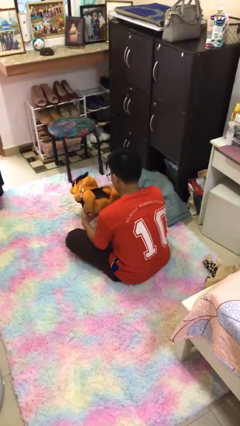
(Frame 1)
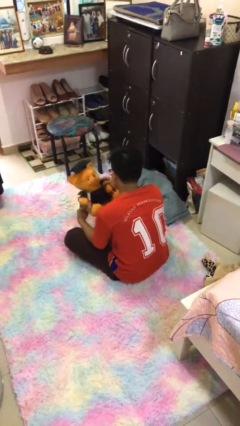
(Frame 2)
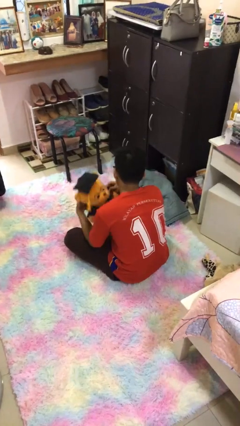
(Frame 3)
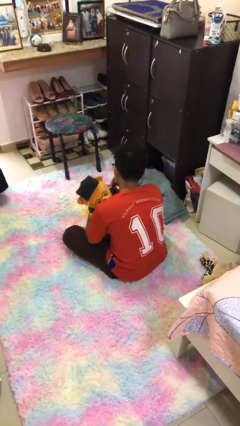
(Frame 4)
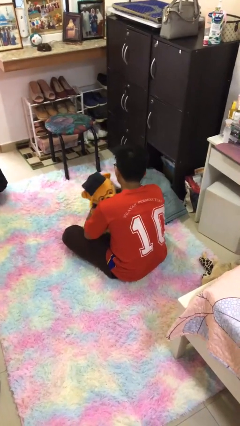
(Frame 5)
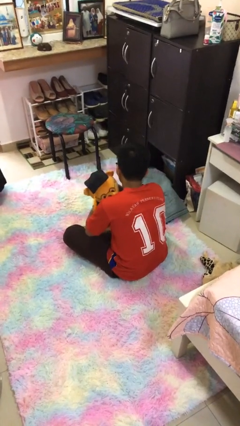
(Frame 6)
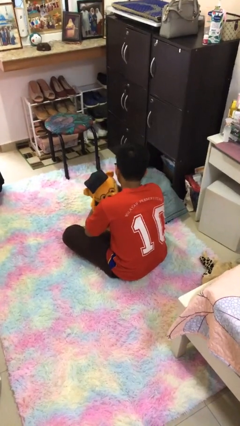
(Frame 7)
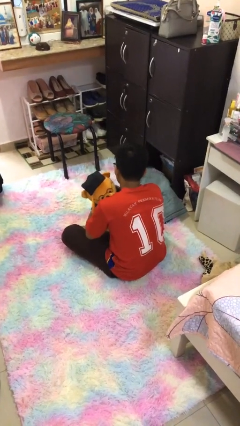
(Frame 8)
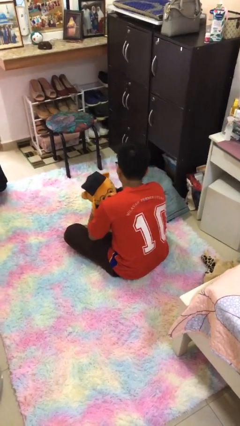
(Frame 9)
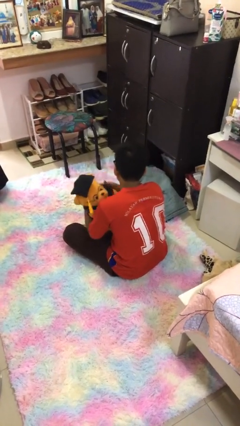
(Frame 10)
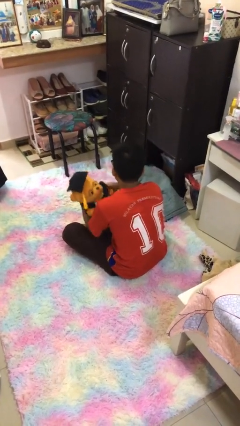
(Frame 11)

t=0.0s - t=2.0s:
person hugs stuffed animal

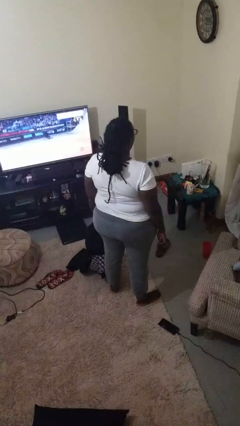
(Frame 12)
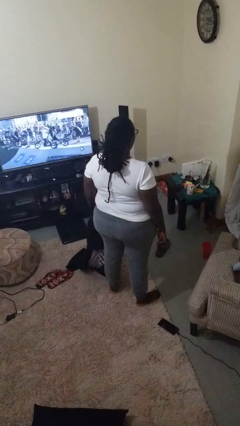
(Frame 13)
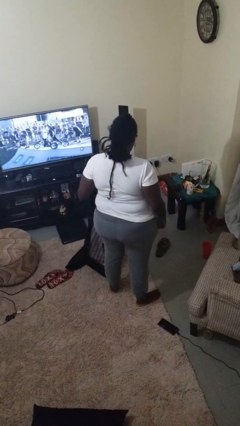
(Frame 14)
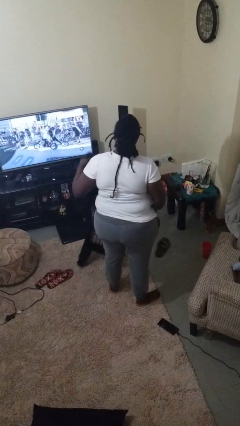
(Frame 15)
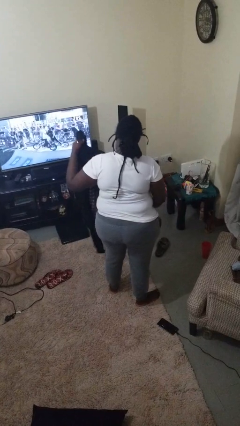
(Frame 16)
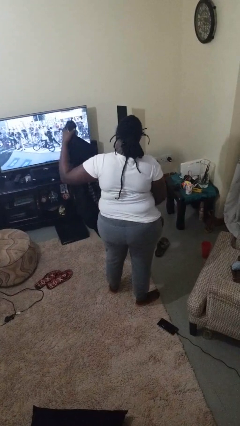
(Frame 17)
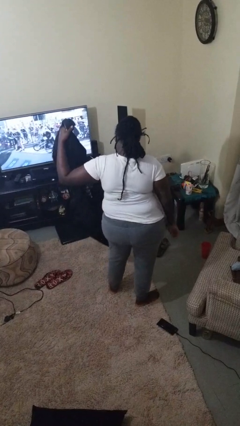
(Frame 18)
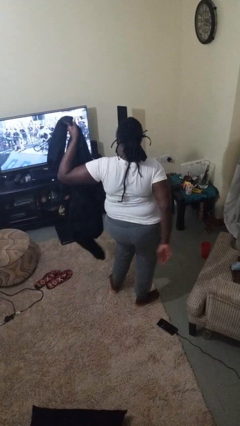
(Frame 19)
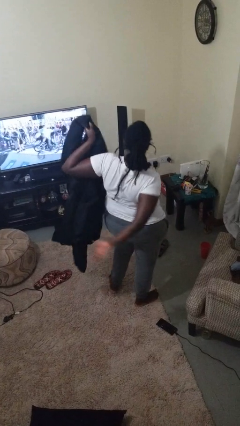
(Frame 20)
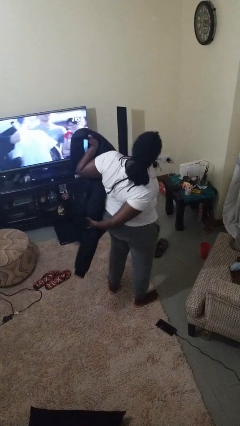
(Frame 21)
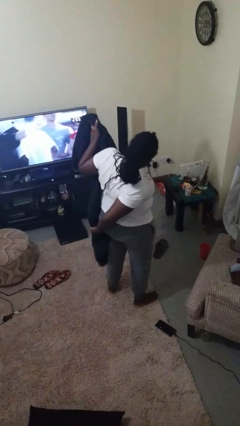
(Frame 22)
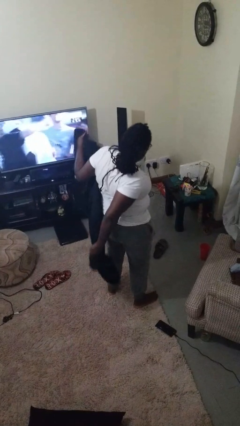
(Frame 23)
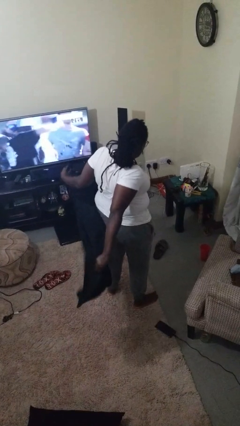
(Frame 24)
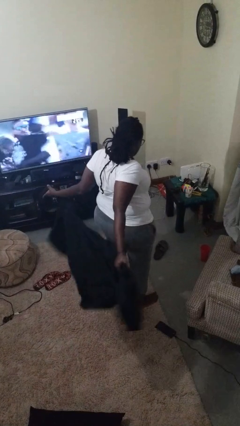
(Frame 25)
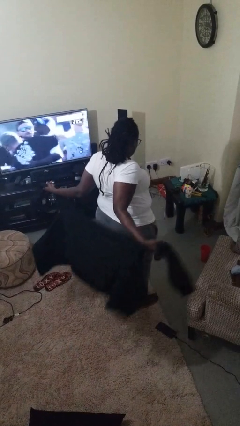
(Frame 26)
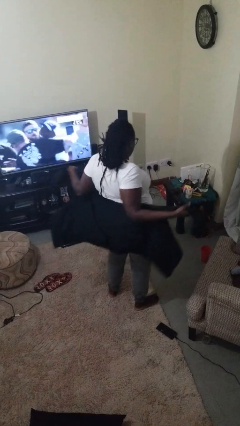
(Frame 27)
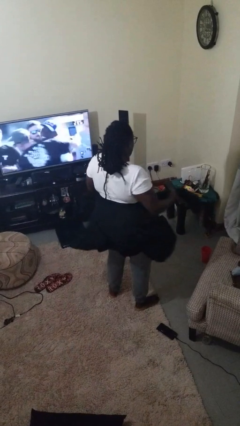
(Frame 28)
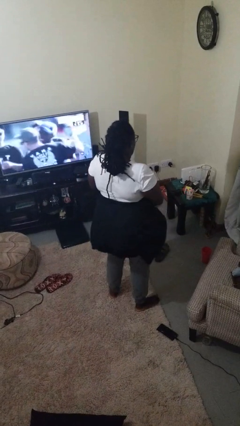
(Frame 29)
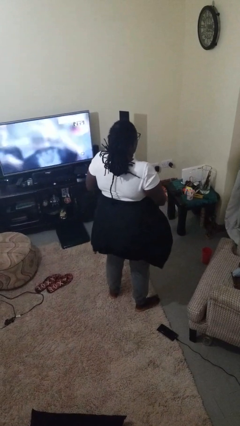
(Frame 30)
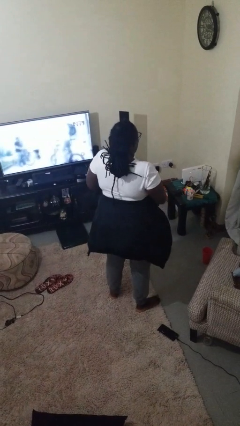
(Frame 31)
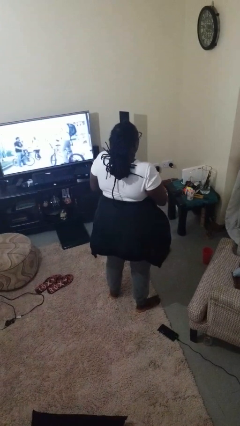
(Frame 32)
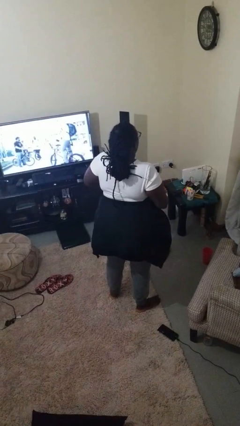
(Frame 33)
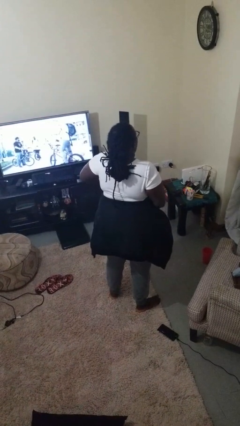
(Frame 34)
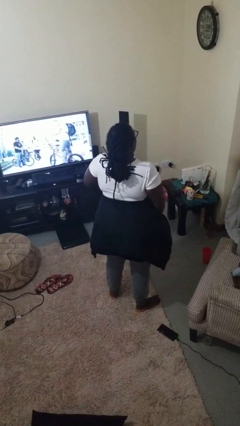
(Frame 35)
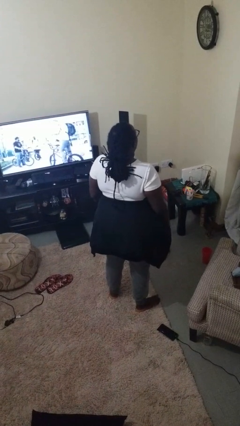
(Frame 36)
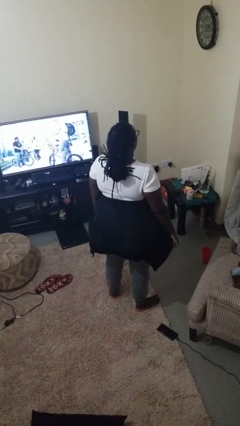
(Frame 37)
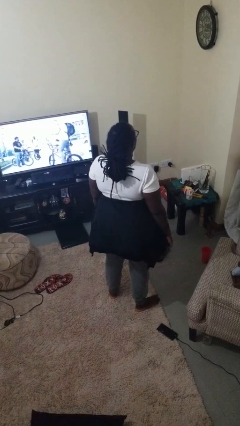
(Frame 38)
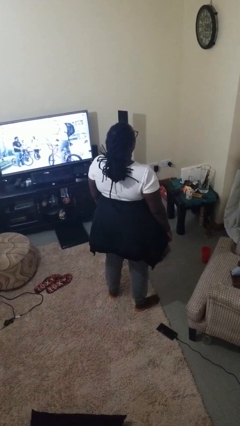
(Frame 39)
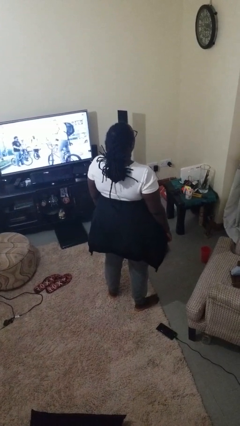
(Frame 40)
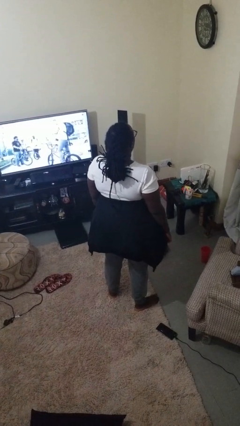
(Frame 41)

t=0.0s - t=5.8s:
person ties jacket around waist

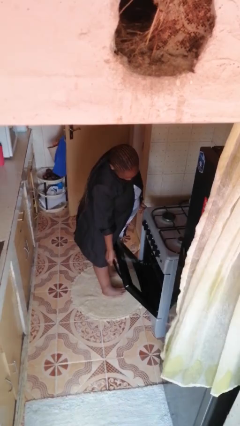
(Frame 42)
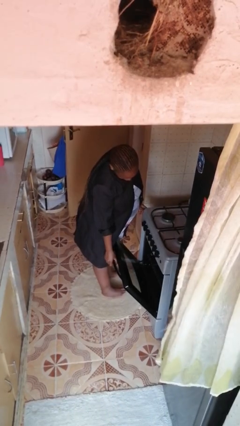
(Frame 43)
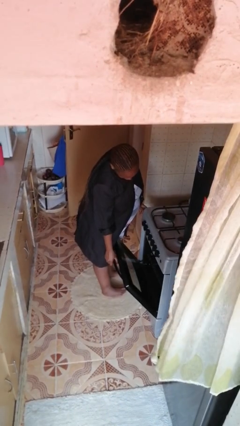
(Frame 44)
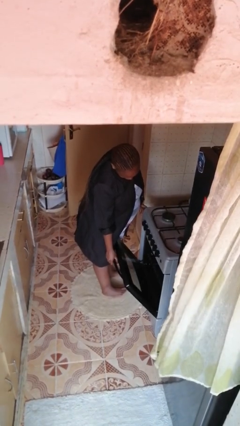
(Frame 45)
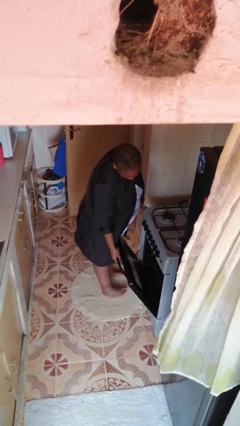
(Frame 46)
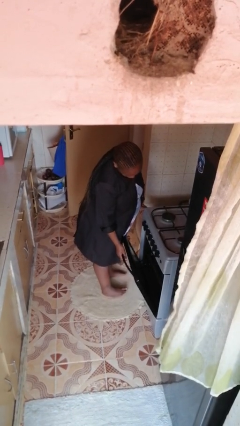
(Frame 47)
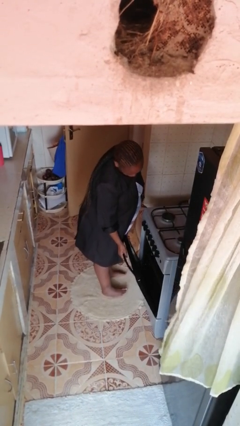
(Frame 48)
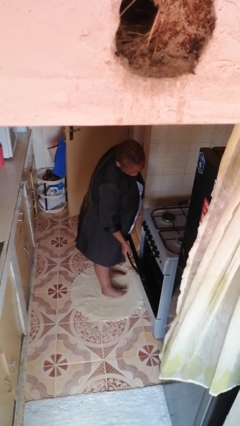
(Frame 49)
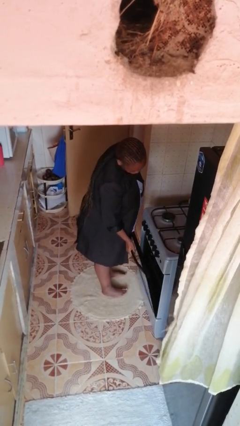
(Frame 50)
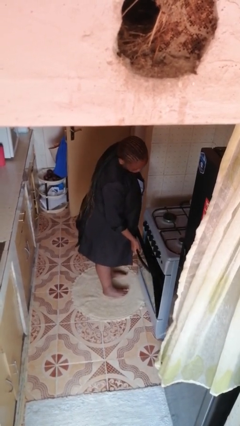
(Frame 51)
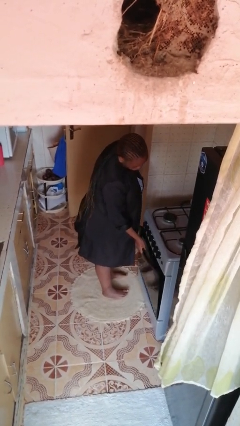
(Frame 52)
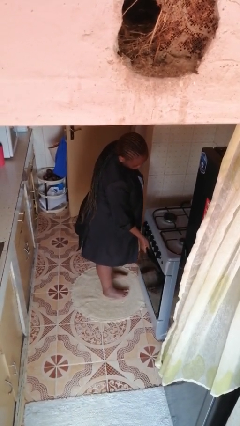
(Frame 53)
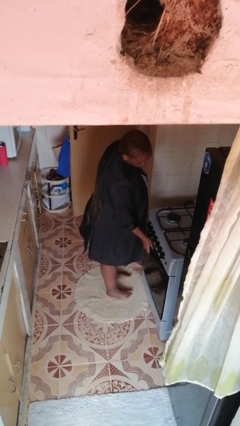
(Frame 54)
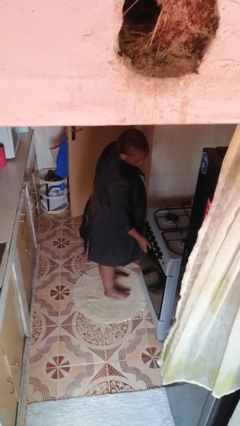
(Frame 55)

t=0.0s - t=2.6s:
person closes oven door

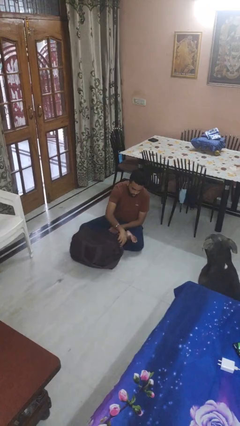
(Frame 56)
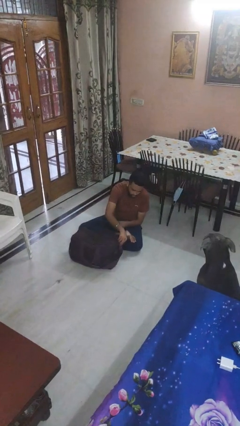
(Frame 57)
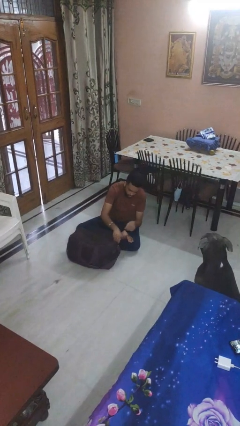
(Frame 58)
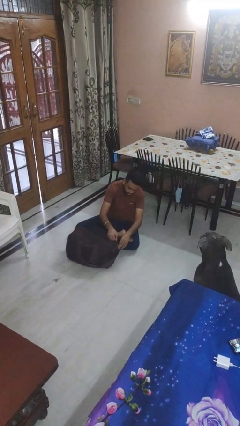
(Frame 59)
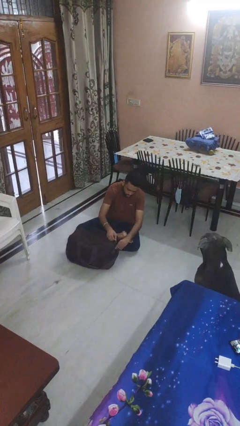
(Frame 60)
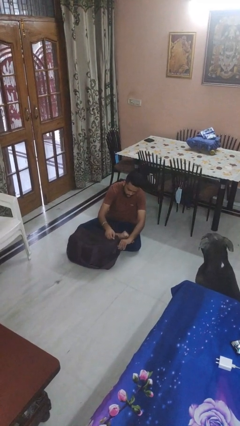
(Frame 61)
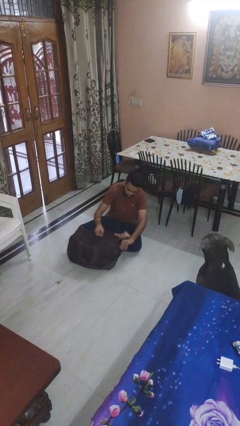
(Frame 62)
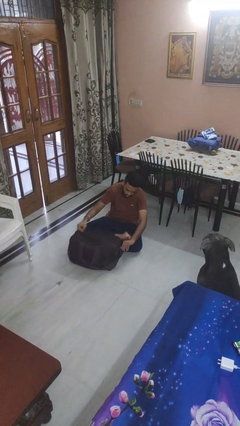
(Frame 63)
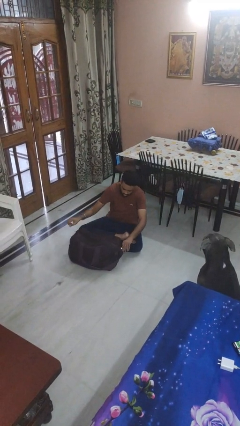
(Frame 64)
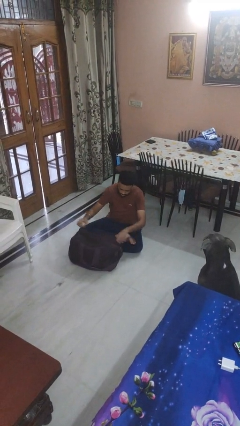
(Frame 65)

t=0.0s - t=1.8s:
person opens suitcase

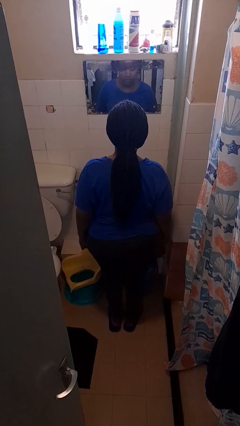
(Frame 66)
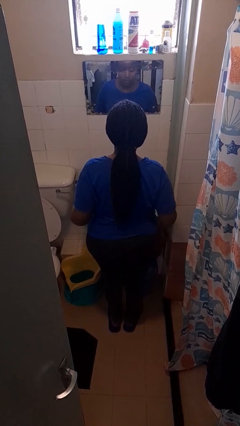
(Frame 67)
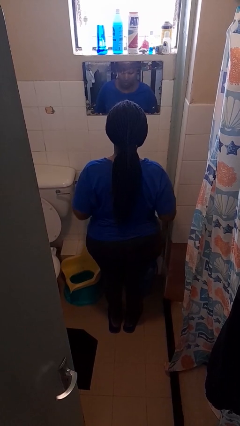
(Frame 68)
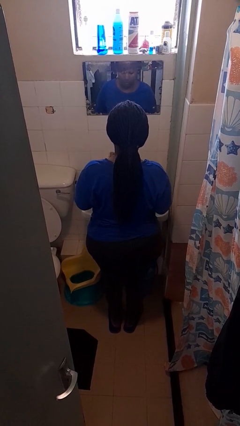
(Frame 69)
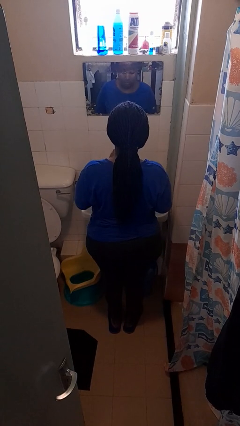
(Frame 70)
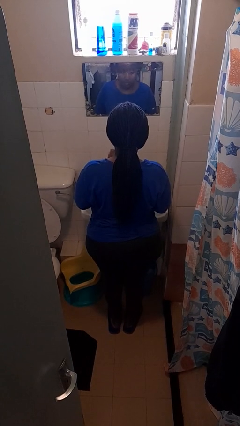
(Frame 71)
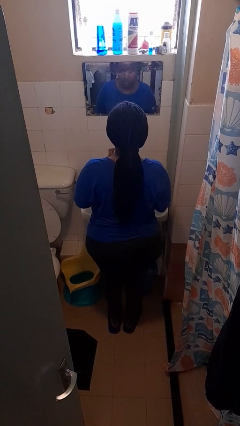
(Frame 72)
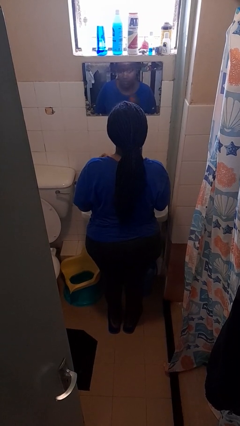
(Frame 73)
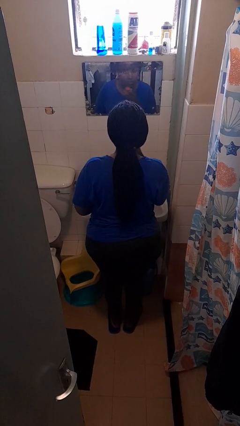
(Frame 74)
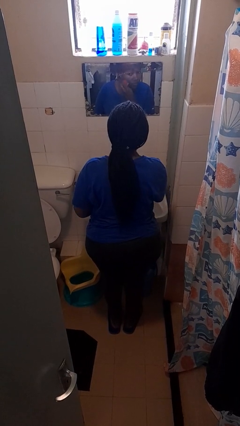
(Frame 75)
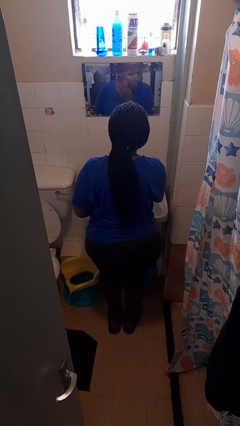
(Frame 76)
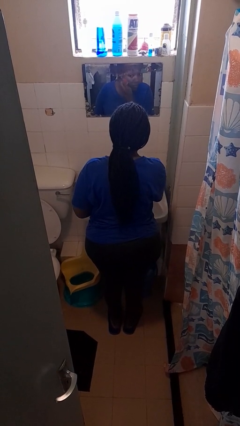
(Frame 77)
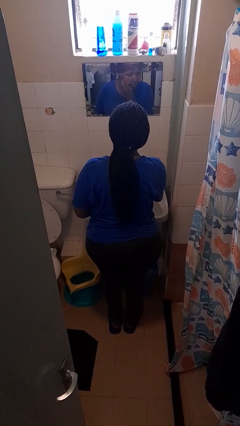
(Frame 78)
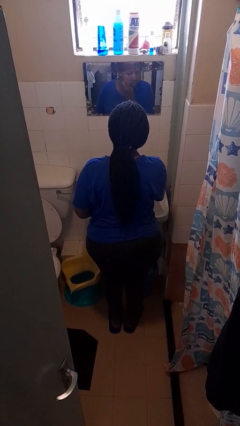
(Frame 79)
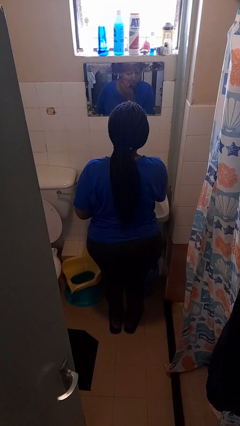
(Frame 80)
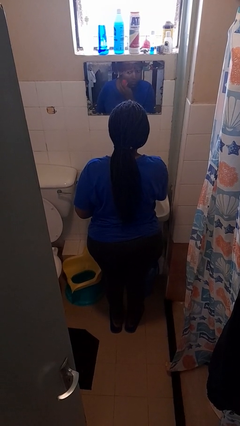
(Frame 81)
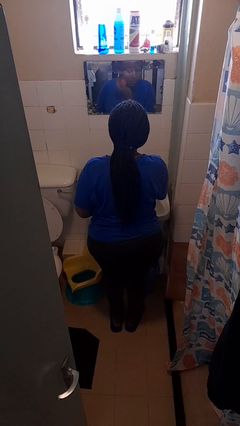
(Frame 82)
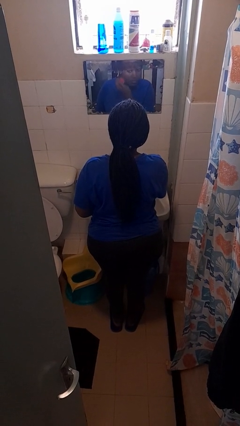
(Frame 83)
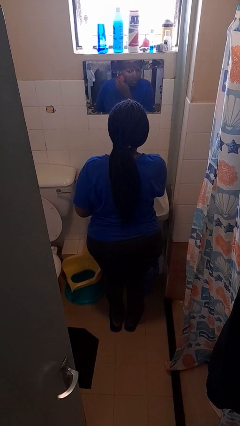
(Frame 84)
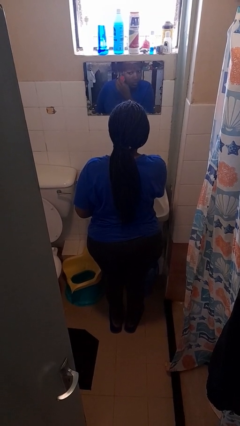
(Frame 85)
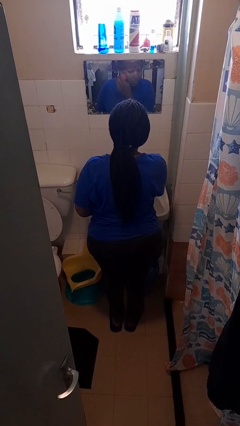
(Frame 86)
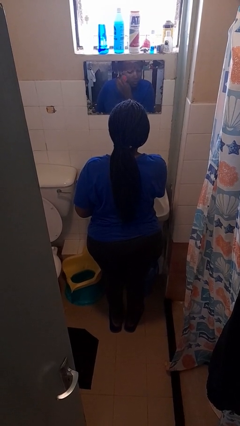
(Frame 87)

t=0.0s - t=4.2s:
person applies foundation makeup

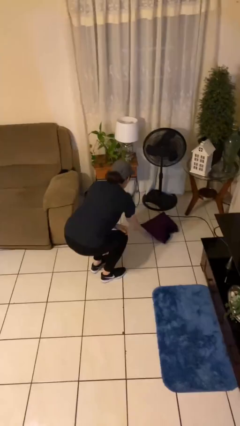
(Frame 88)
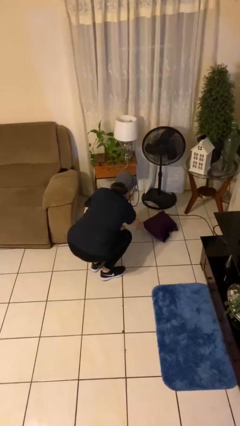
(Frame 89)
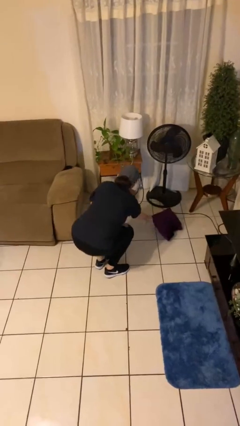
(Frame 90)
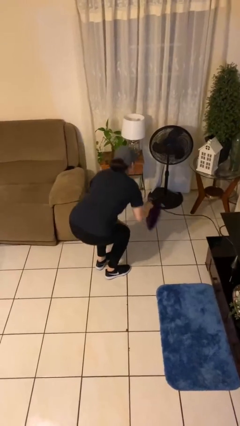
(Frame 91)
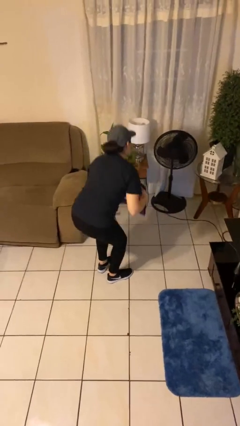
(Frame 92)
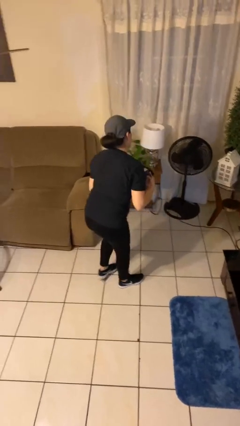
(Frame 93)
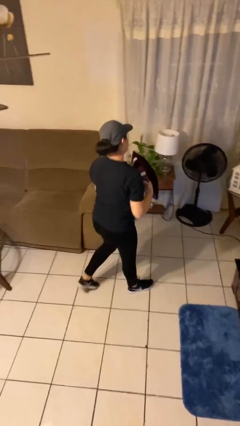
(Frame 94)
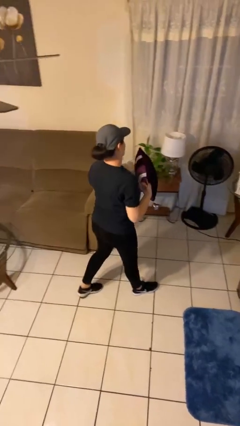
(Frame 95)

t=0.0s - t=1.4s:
person picks up object from floor
